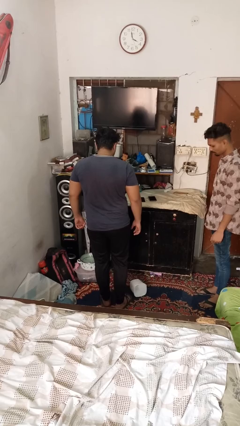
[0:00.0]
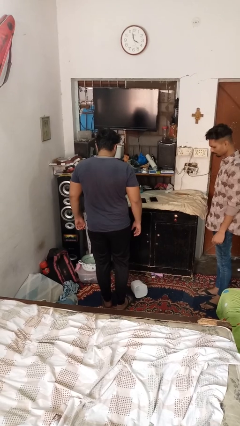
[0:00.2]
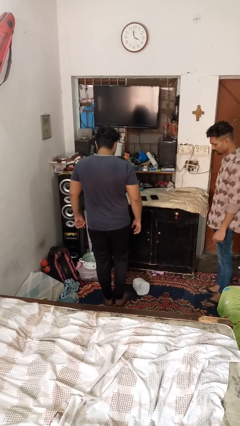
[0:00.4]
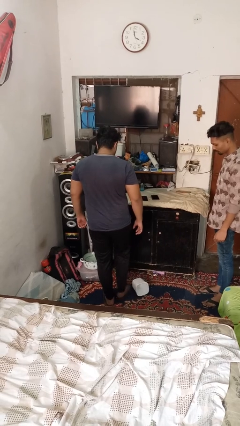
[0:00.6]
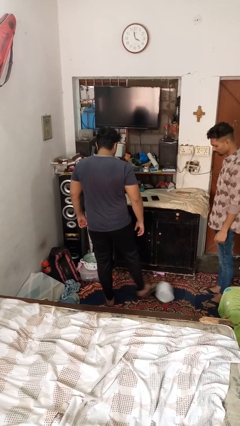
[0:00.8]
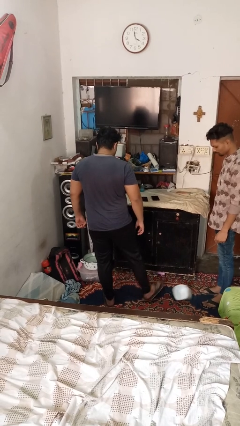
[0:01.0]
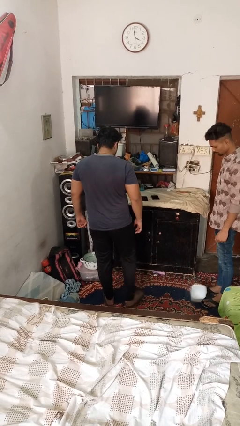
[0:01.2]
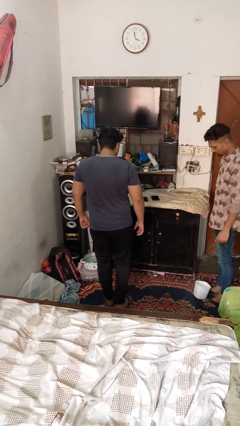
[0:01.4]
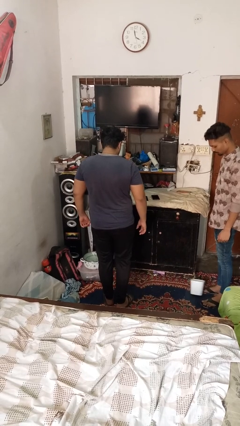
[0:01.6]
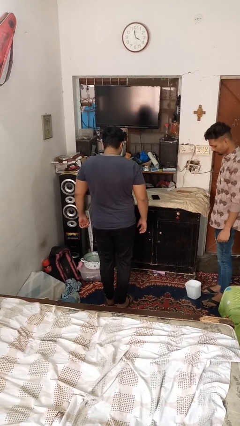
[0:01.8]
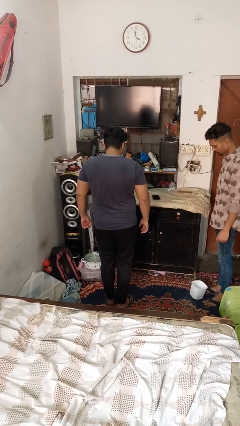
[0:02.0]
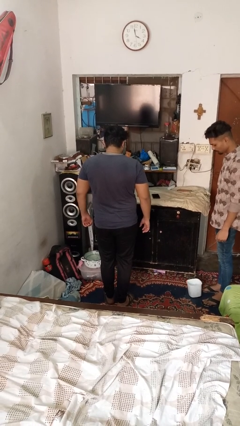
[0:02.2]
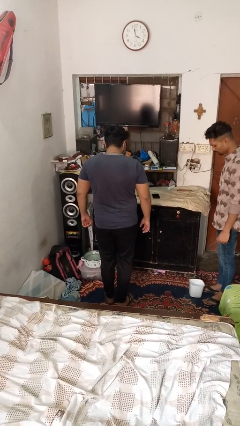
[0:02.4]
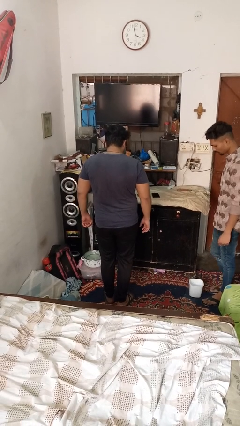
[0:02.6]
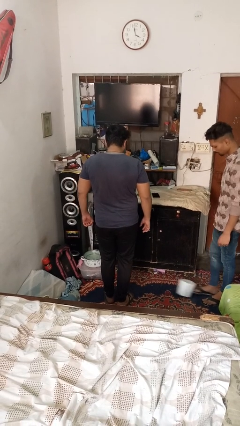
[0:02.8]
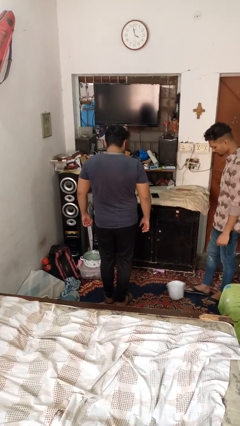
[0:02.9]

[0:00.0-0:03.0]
person kicks object to person

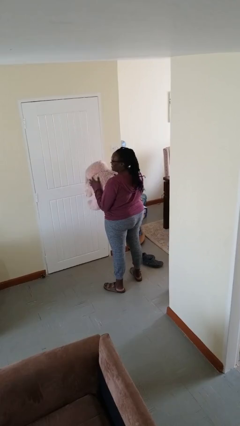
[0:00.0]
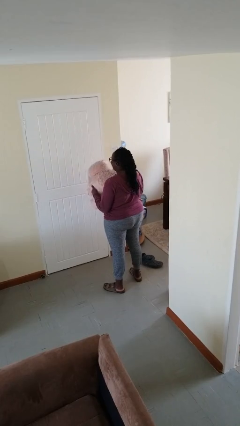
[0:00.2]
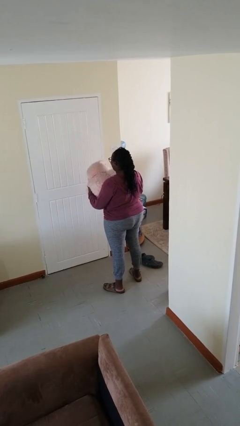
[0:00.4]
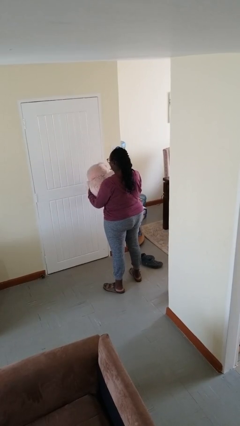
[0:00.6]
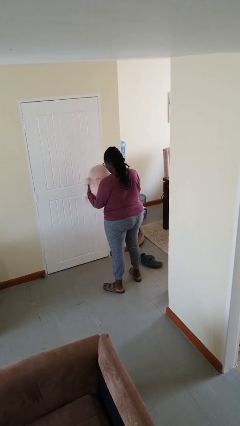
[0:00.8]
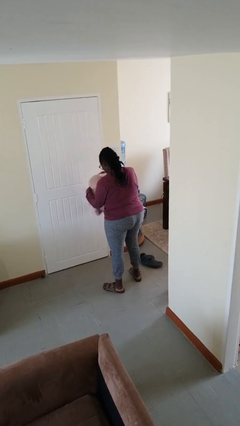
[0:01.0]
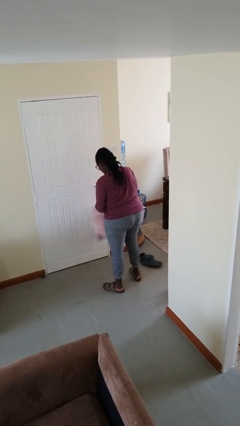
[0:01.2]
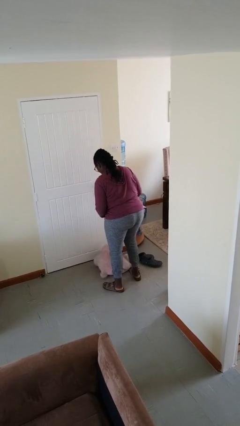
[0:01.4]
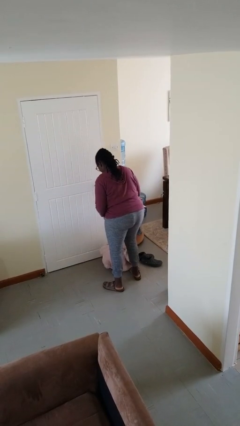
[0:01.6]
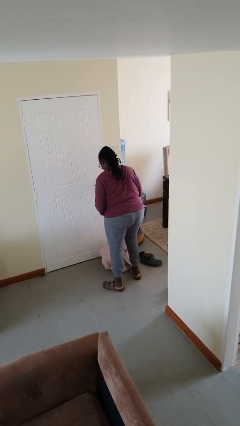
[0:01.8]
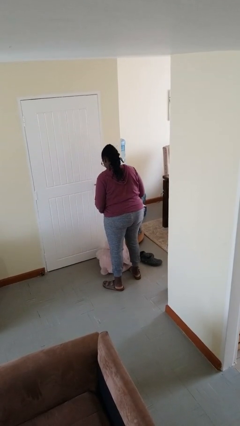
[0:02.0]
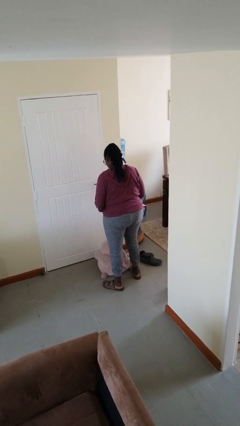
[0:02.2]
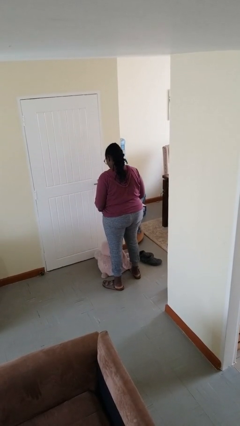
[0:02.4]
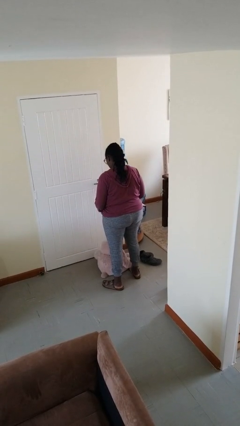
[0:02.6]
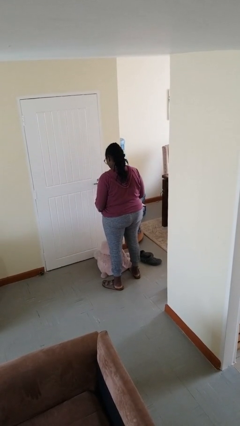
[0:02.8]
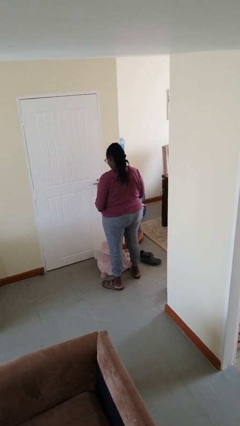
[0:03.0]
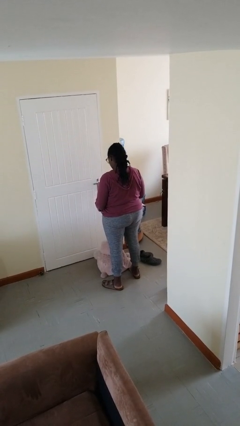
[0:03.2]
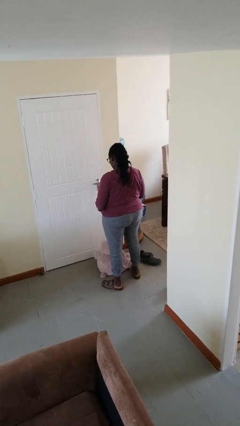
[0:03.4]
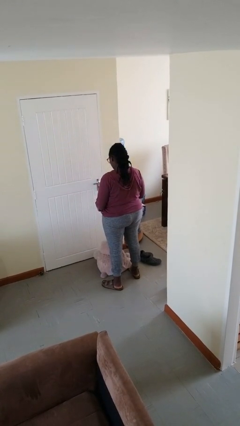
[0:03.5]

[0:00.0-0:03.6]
person drops object

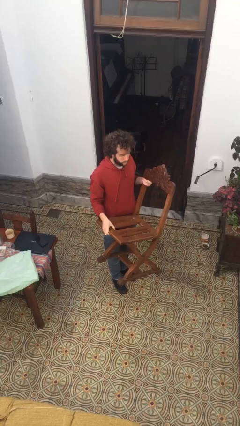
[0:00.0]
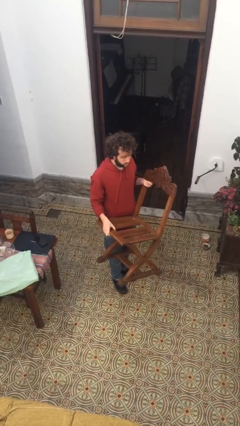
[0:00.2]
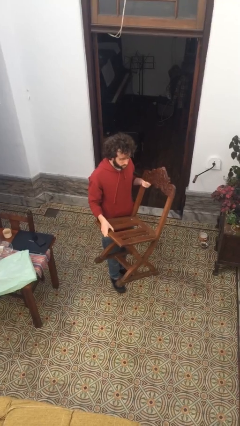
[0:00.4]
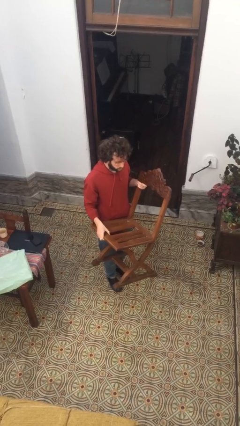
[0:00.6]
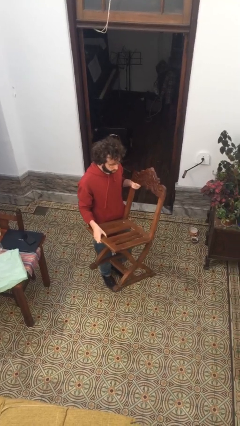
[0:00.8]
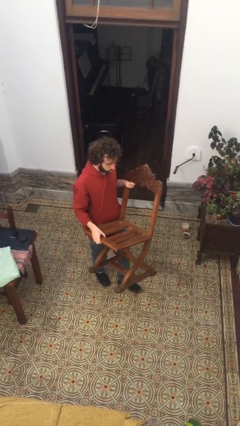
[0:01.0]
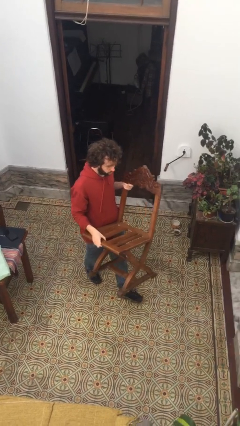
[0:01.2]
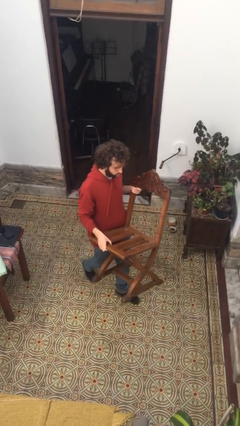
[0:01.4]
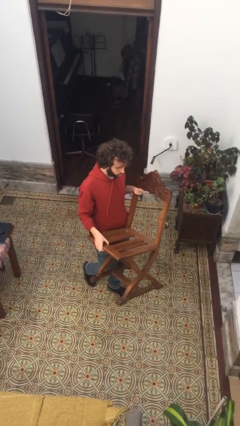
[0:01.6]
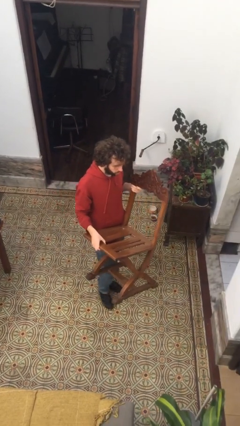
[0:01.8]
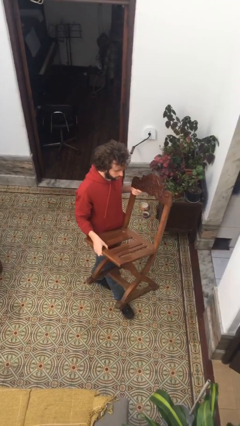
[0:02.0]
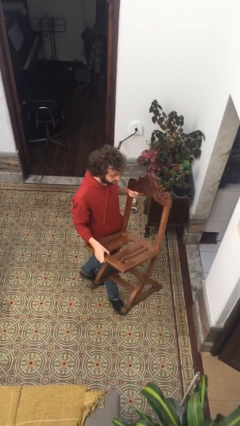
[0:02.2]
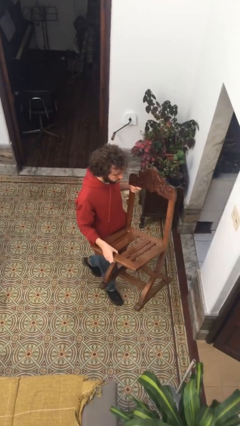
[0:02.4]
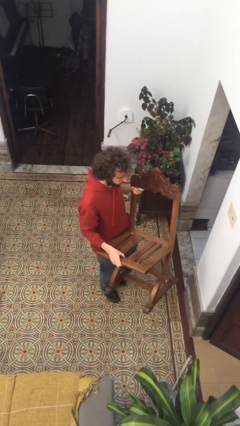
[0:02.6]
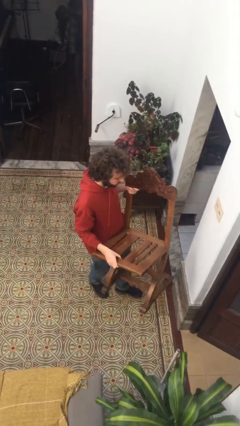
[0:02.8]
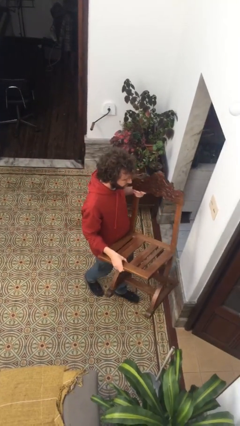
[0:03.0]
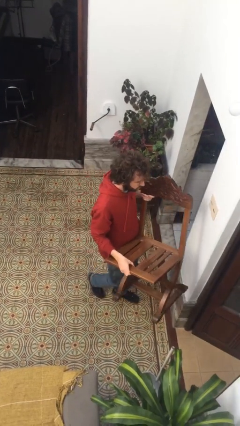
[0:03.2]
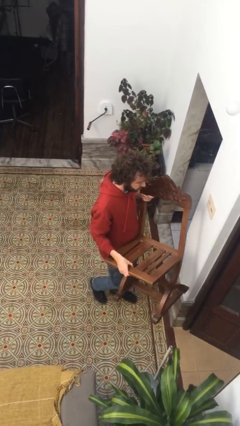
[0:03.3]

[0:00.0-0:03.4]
person carries furniture

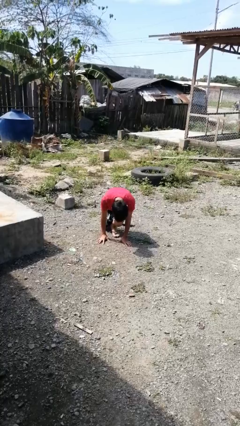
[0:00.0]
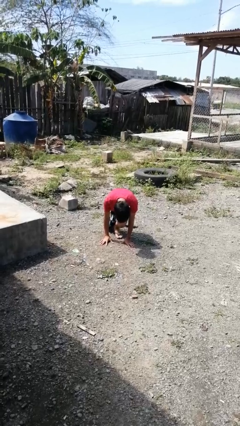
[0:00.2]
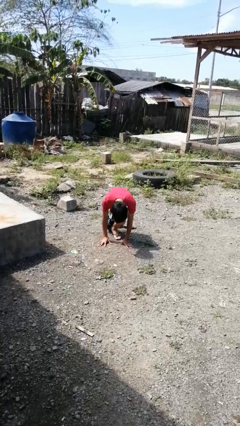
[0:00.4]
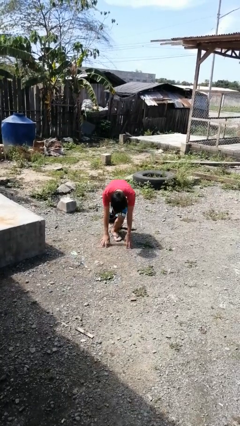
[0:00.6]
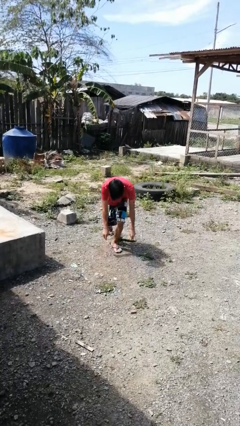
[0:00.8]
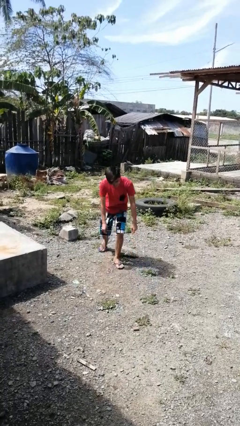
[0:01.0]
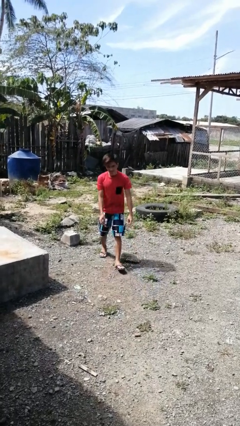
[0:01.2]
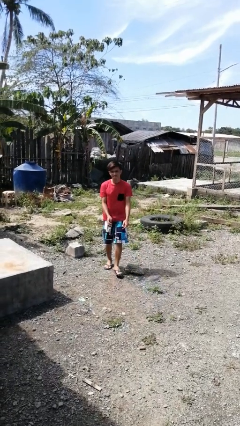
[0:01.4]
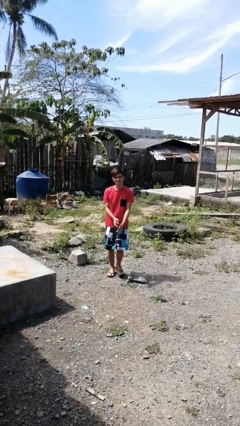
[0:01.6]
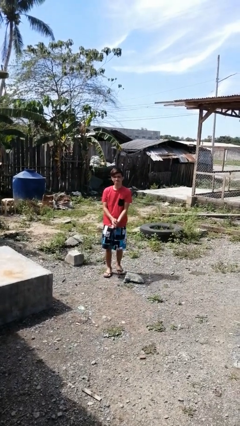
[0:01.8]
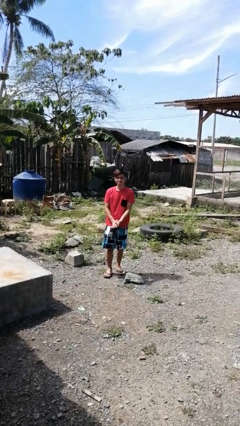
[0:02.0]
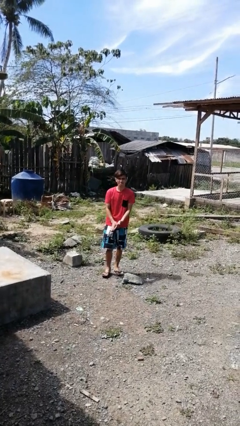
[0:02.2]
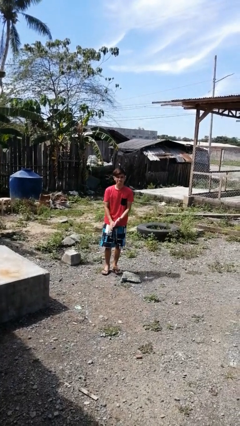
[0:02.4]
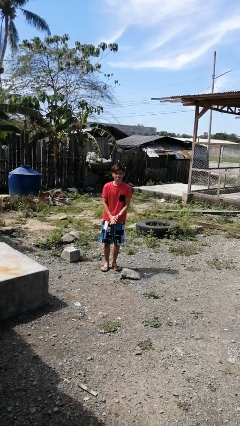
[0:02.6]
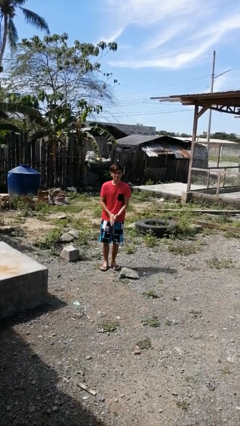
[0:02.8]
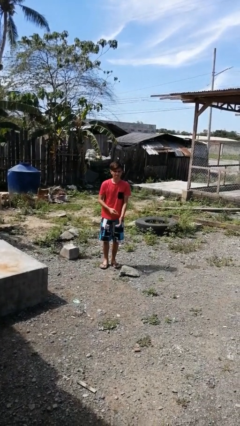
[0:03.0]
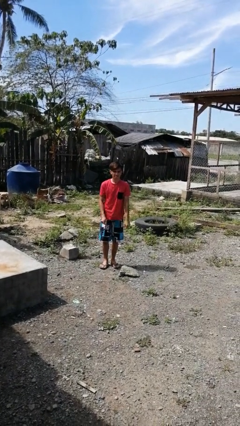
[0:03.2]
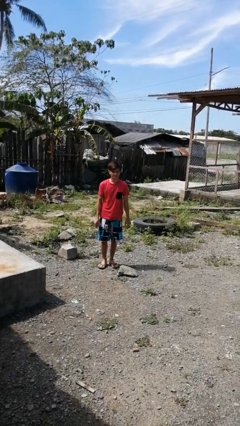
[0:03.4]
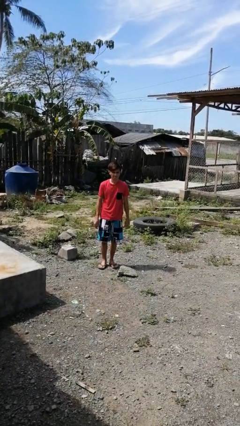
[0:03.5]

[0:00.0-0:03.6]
person stands up from floor

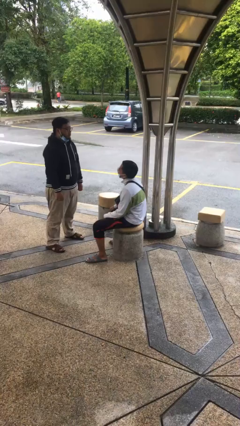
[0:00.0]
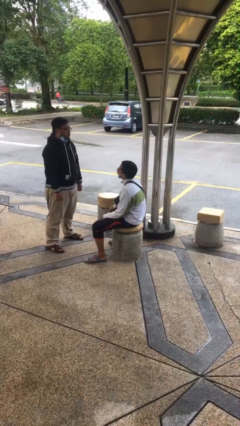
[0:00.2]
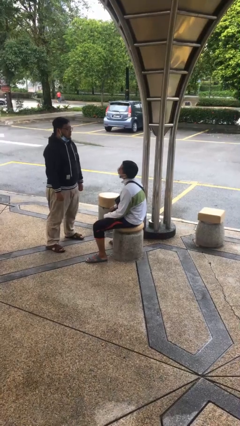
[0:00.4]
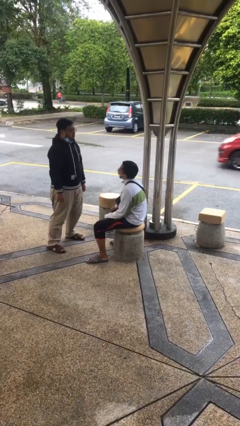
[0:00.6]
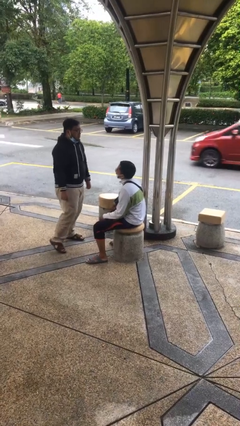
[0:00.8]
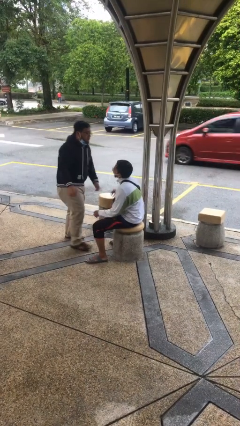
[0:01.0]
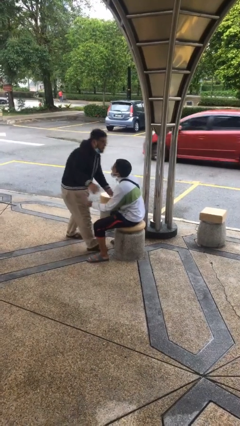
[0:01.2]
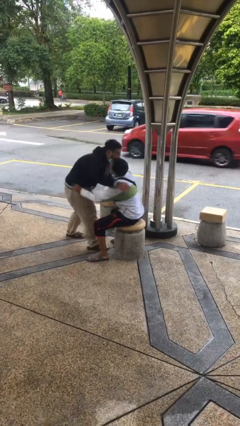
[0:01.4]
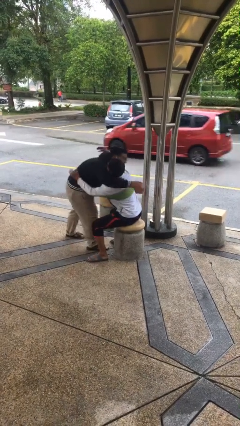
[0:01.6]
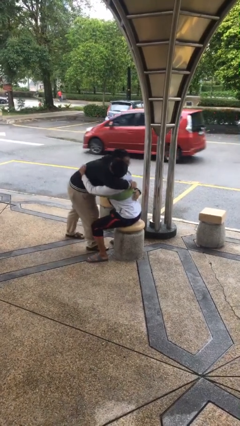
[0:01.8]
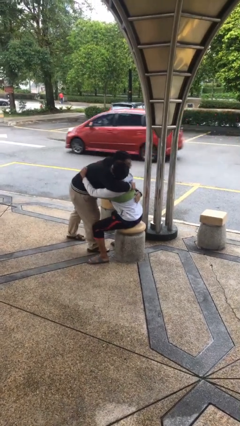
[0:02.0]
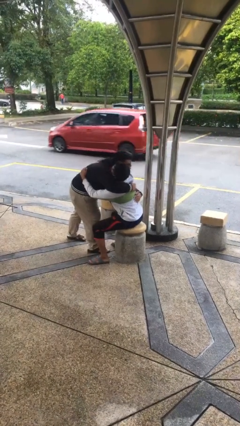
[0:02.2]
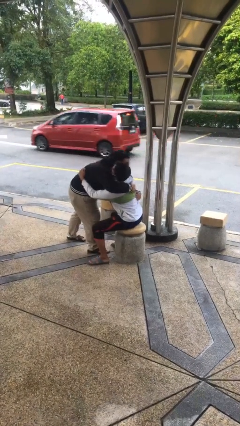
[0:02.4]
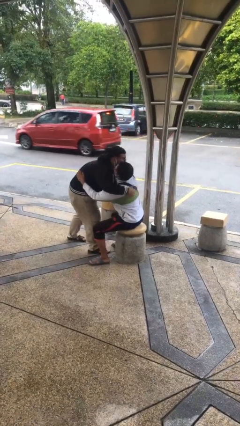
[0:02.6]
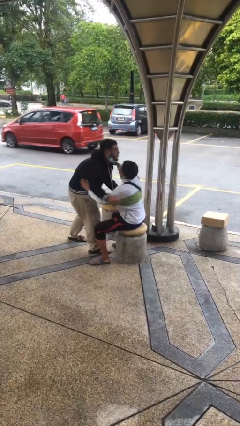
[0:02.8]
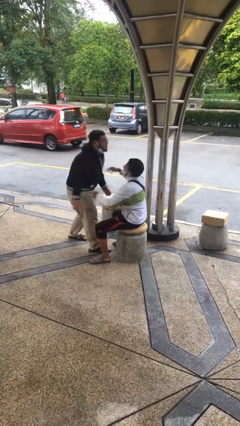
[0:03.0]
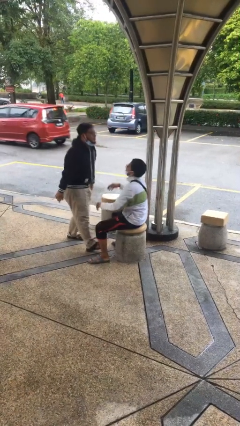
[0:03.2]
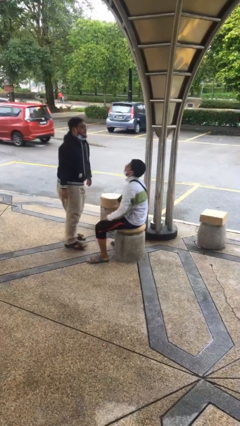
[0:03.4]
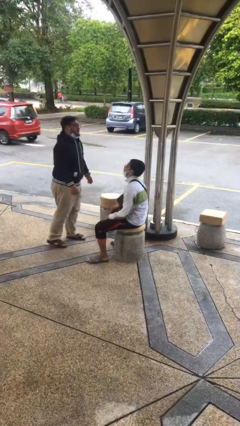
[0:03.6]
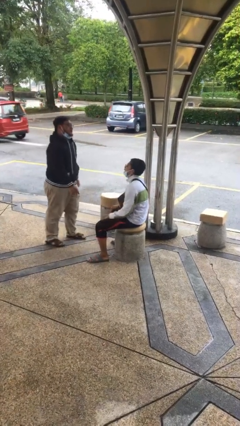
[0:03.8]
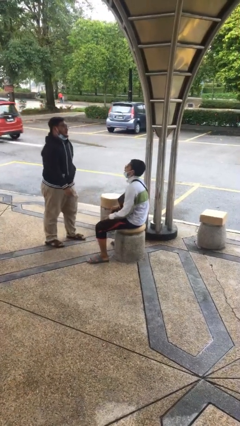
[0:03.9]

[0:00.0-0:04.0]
person embraces person
